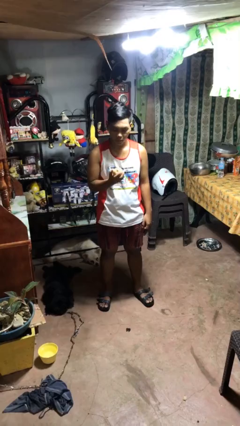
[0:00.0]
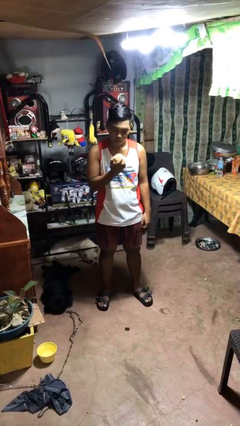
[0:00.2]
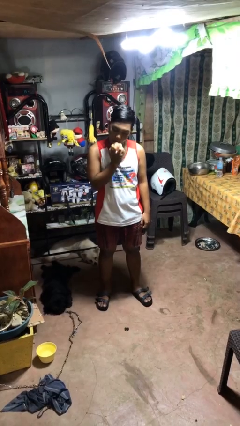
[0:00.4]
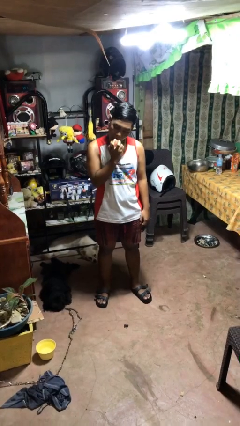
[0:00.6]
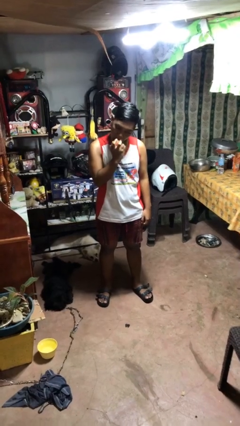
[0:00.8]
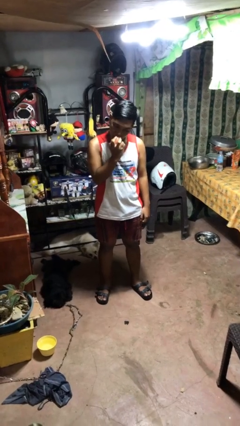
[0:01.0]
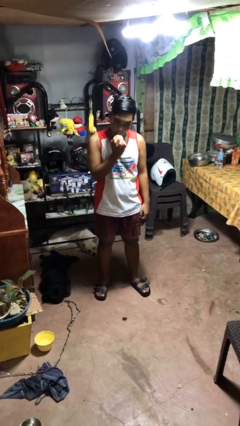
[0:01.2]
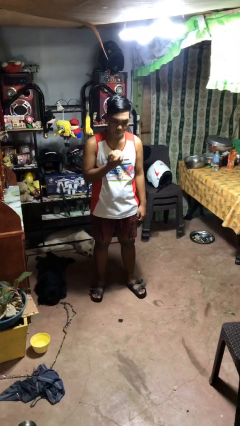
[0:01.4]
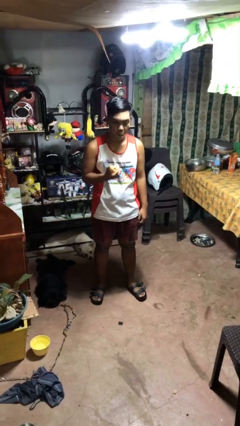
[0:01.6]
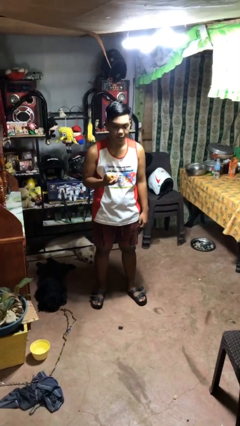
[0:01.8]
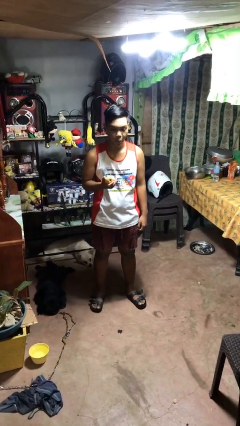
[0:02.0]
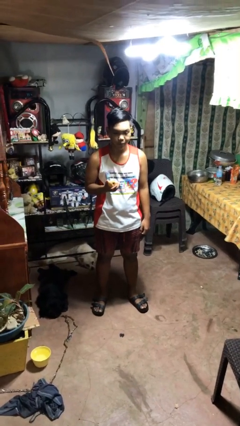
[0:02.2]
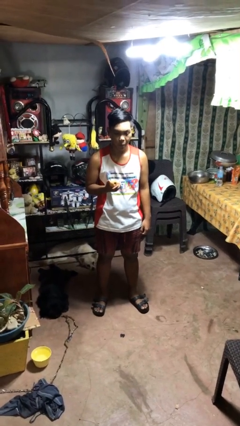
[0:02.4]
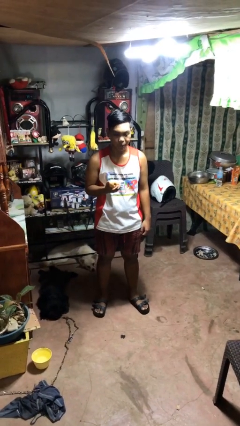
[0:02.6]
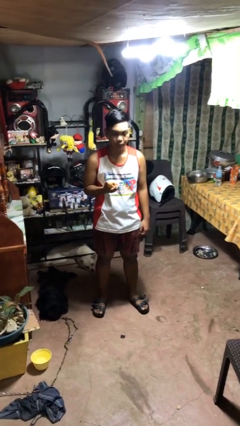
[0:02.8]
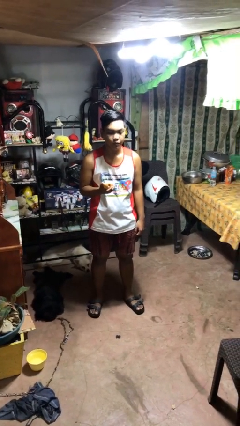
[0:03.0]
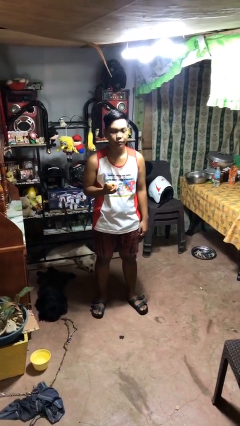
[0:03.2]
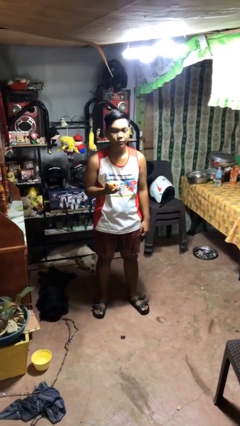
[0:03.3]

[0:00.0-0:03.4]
person eats apple

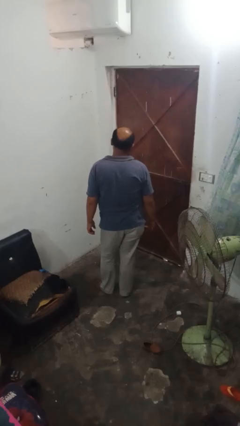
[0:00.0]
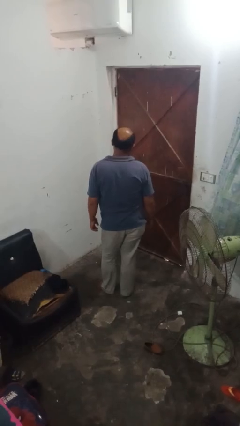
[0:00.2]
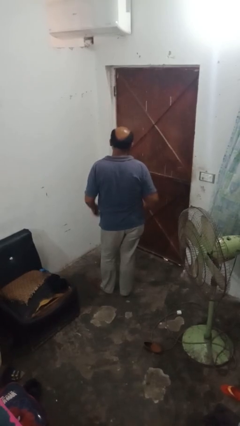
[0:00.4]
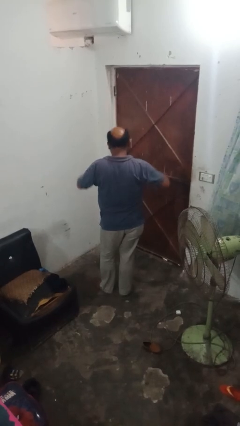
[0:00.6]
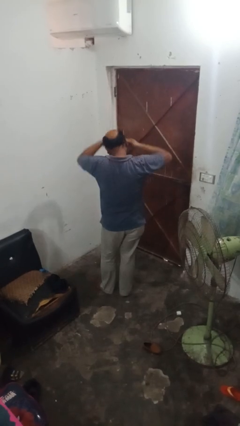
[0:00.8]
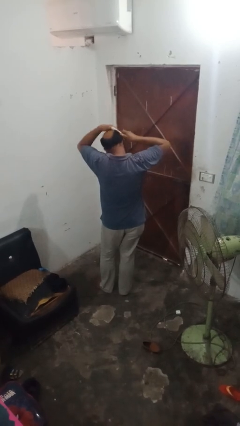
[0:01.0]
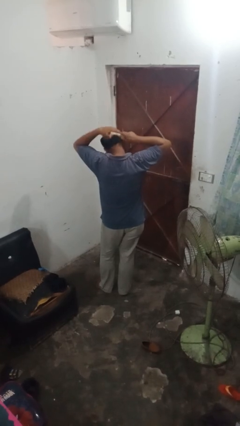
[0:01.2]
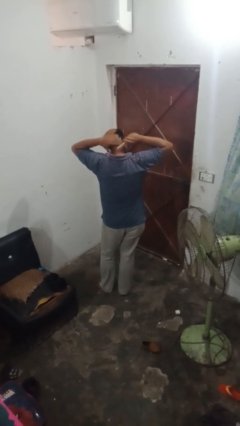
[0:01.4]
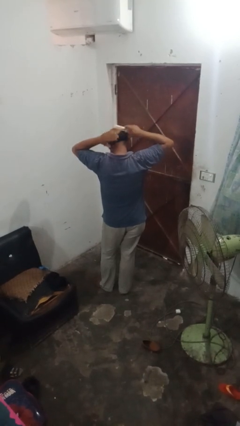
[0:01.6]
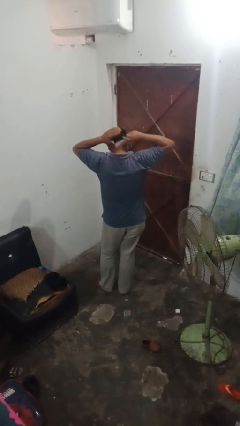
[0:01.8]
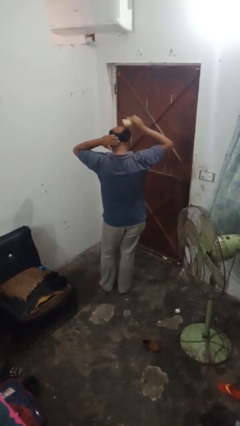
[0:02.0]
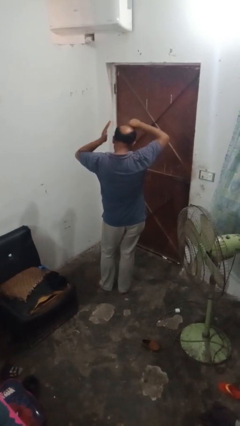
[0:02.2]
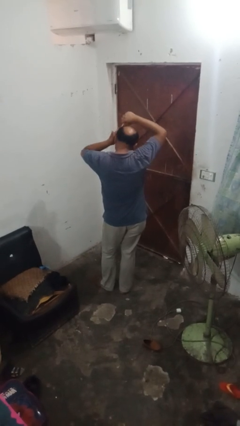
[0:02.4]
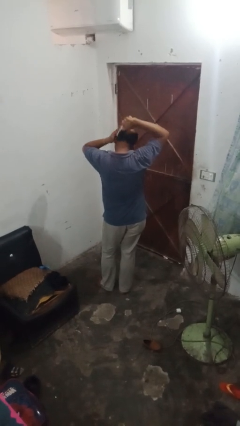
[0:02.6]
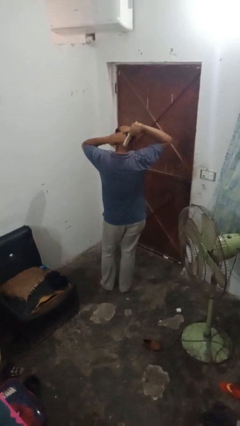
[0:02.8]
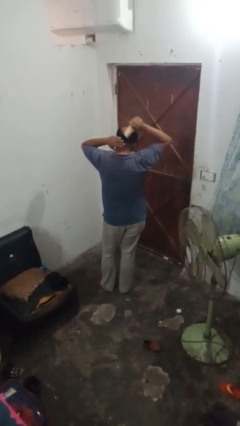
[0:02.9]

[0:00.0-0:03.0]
person brushes hair

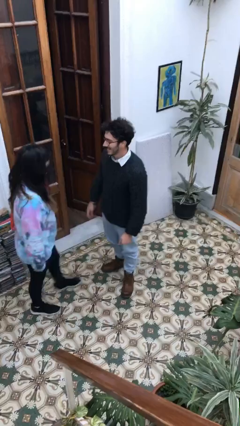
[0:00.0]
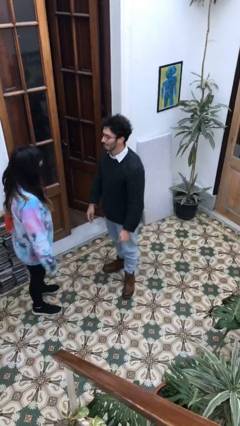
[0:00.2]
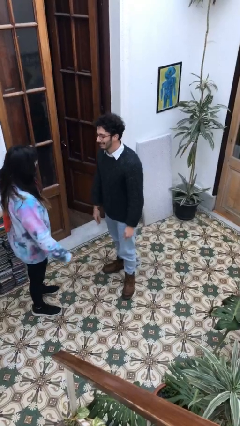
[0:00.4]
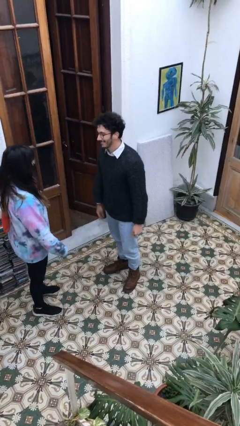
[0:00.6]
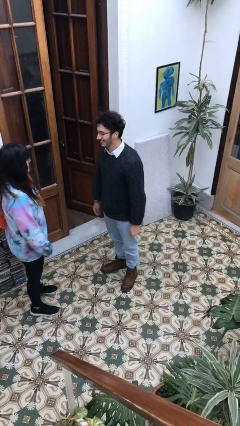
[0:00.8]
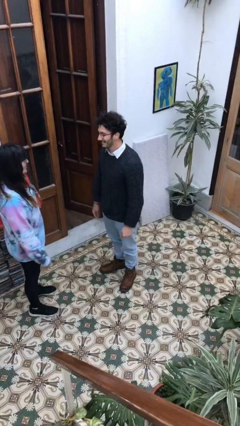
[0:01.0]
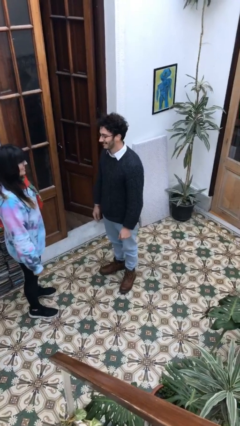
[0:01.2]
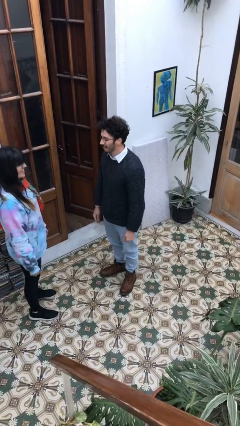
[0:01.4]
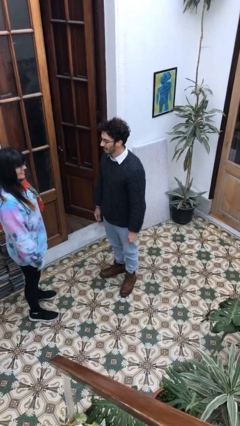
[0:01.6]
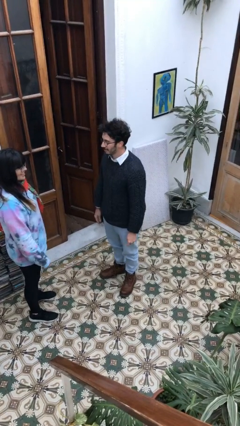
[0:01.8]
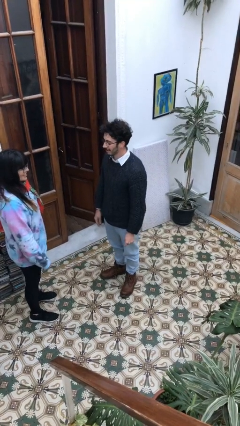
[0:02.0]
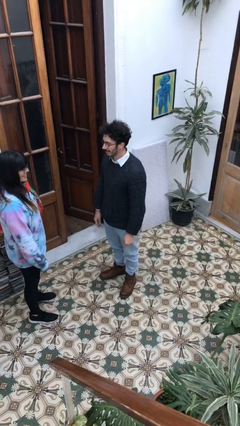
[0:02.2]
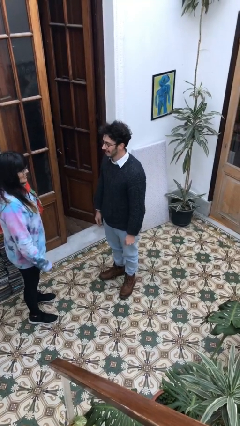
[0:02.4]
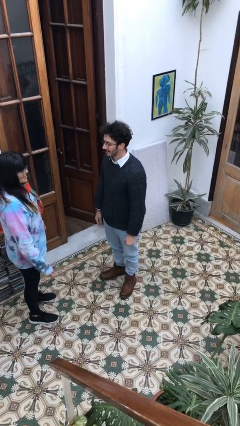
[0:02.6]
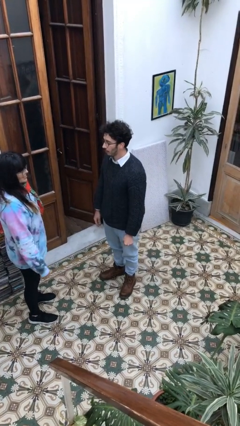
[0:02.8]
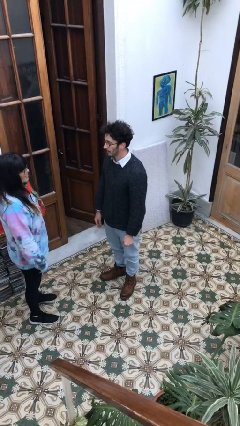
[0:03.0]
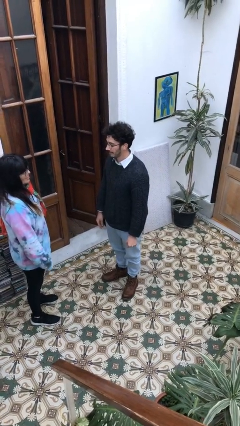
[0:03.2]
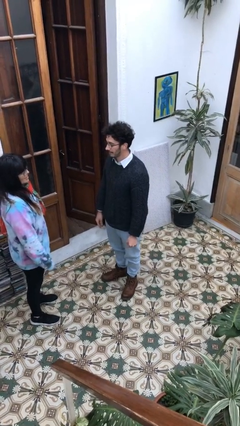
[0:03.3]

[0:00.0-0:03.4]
person talks to person

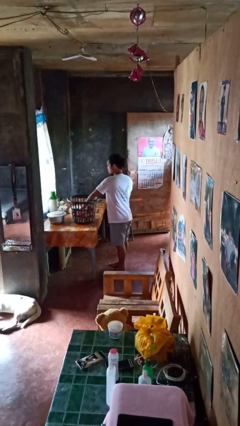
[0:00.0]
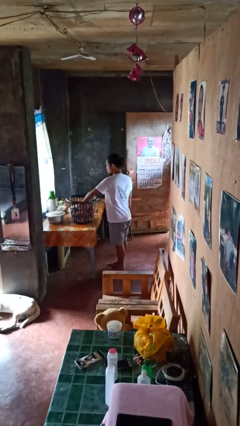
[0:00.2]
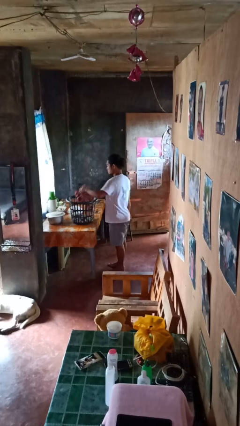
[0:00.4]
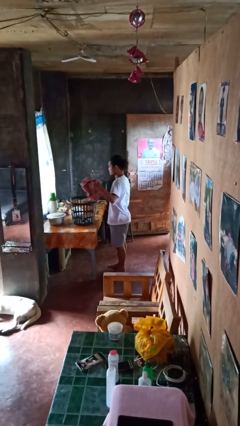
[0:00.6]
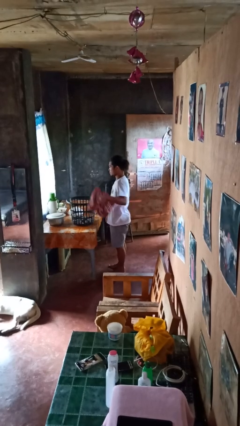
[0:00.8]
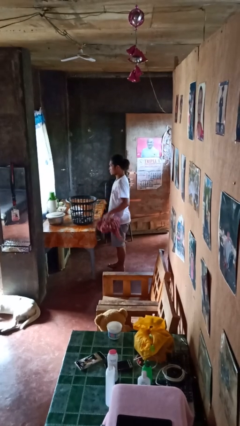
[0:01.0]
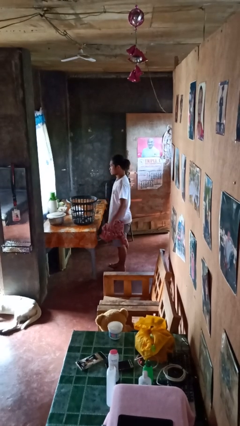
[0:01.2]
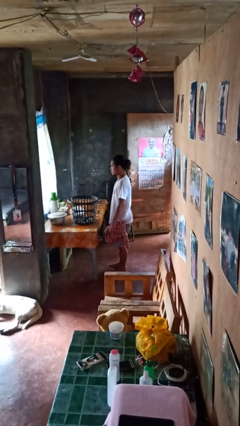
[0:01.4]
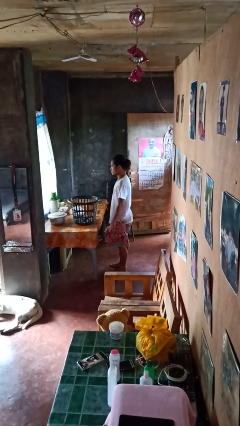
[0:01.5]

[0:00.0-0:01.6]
person takes object from basket

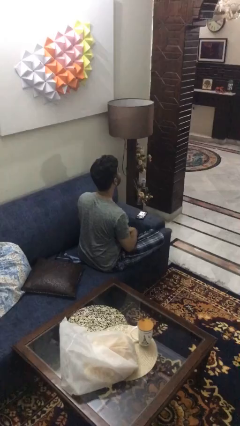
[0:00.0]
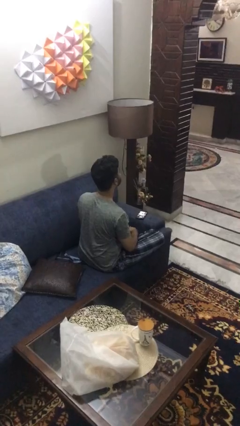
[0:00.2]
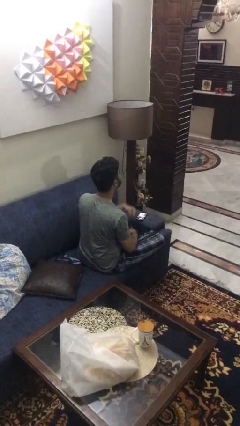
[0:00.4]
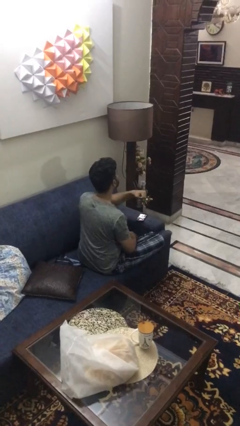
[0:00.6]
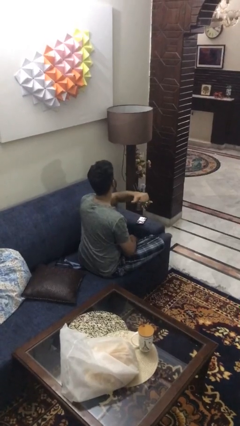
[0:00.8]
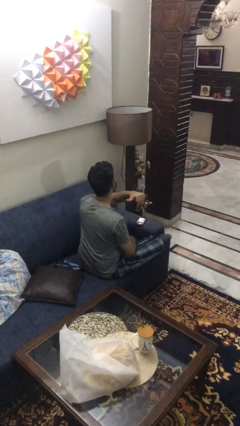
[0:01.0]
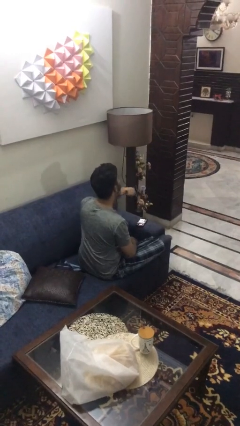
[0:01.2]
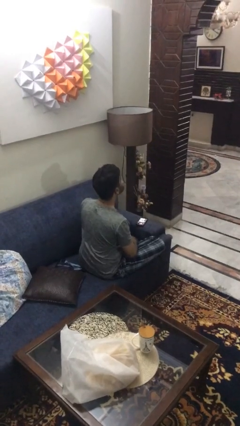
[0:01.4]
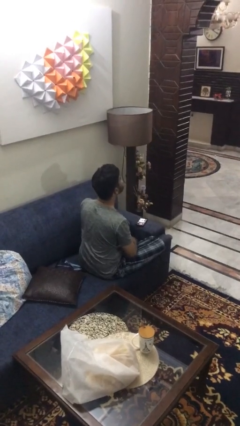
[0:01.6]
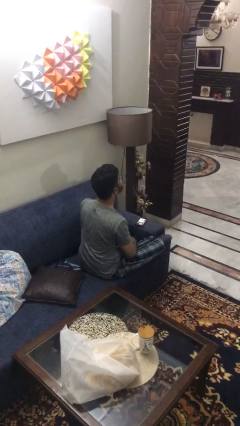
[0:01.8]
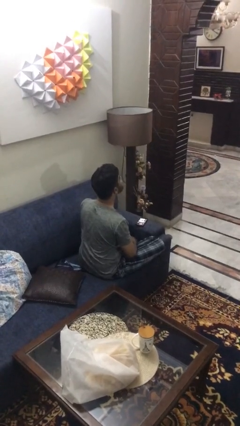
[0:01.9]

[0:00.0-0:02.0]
person gestures cut

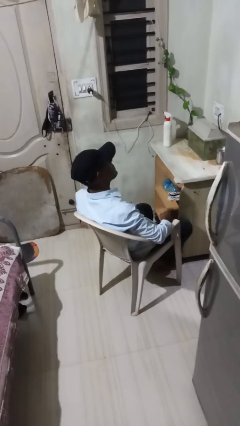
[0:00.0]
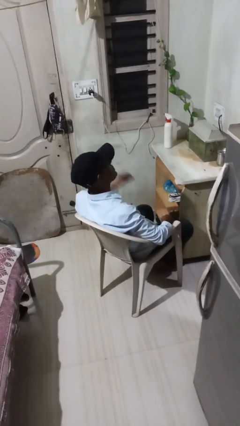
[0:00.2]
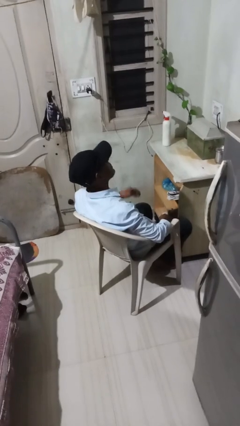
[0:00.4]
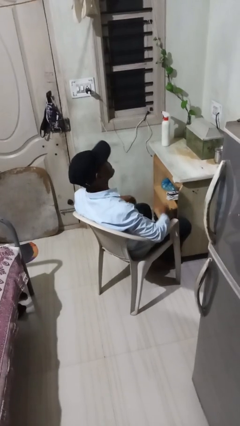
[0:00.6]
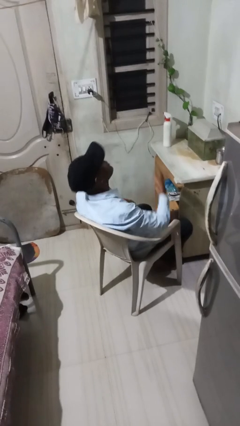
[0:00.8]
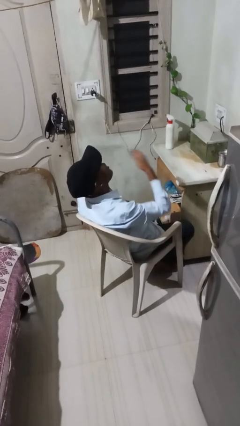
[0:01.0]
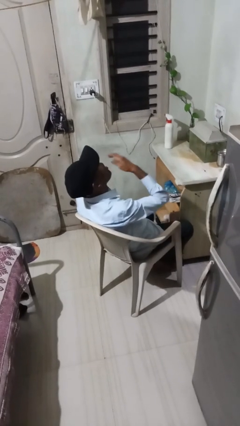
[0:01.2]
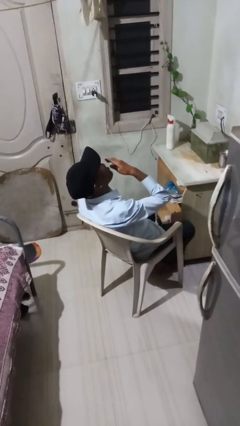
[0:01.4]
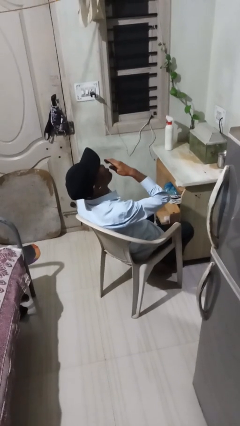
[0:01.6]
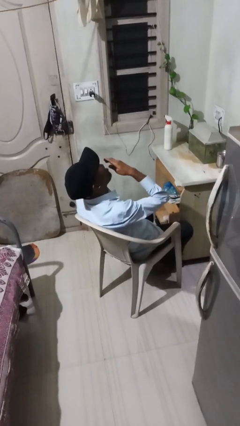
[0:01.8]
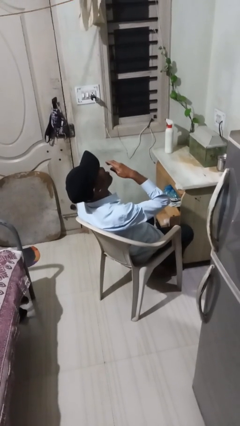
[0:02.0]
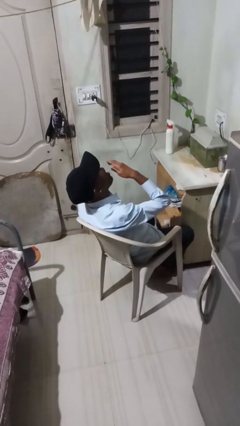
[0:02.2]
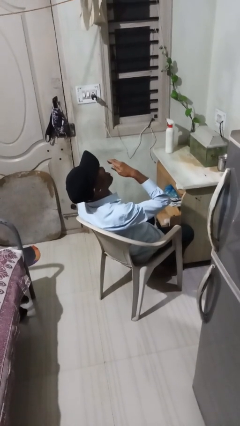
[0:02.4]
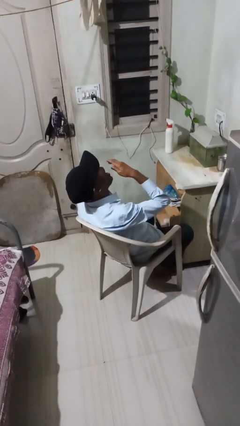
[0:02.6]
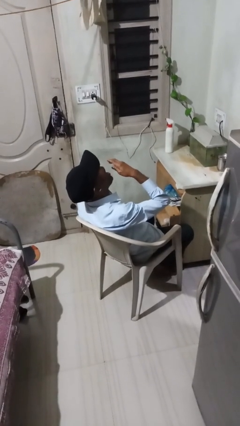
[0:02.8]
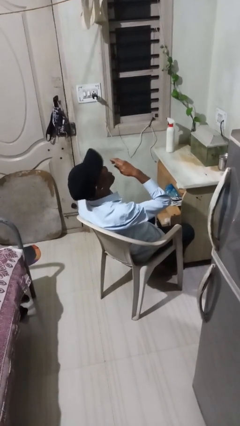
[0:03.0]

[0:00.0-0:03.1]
person yawns

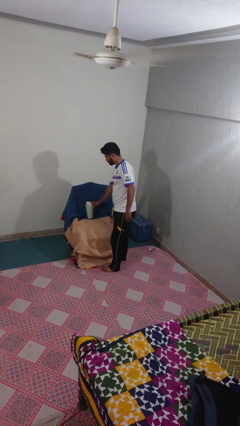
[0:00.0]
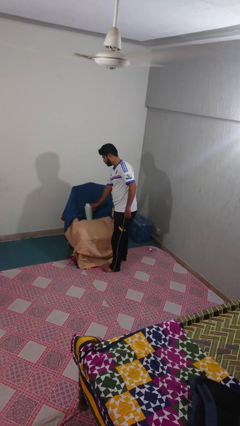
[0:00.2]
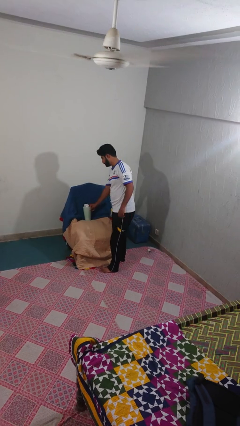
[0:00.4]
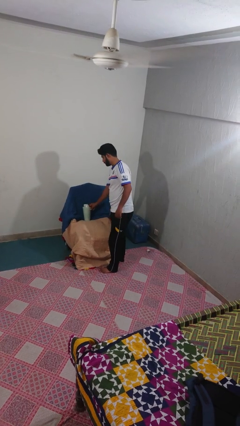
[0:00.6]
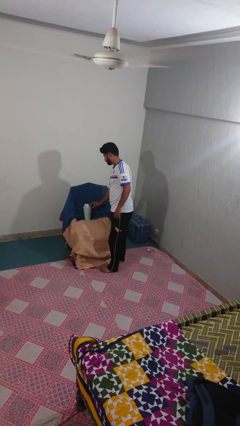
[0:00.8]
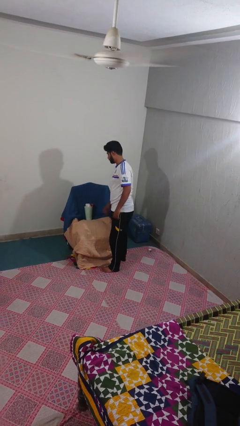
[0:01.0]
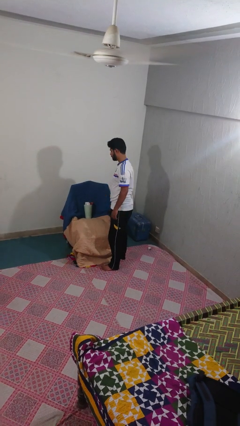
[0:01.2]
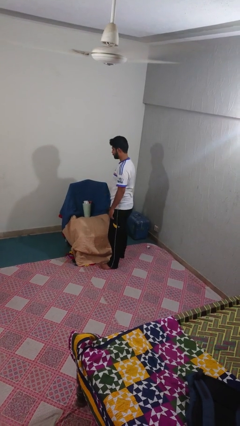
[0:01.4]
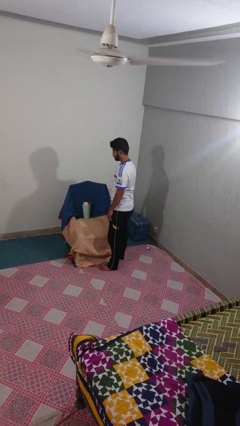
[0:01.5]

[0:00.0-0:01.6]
person puts down object on couch
